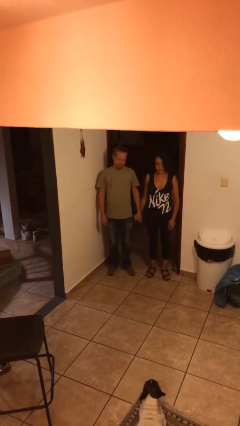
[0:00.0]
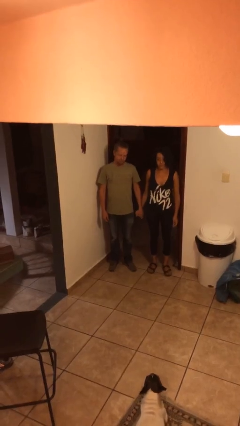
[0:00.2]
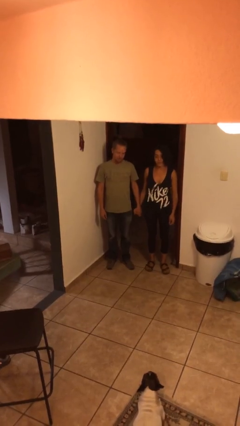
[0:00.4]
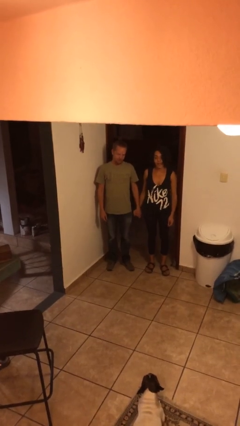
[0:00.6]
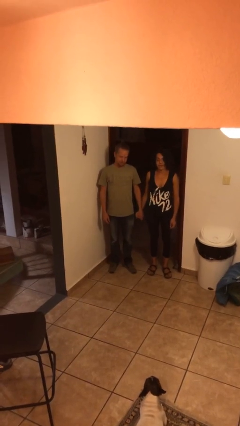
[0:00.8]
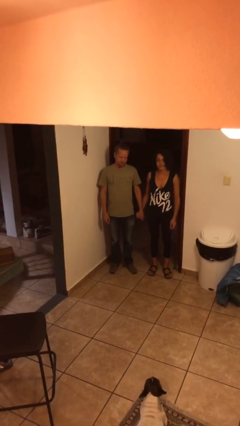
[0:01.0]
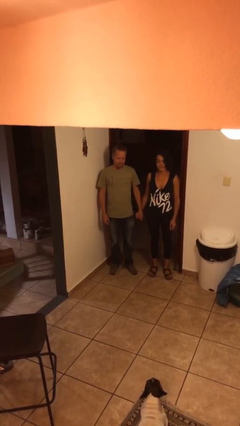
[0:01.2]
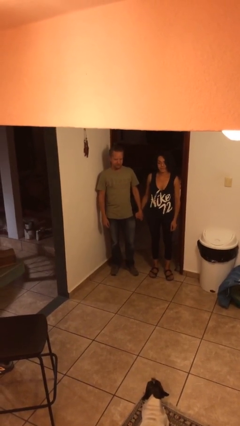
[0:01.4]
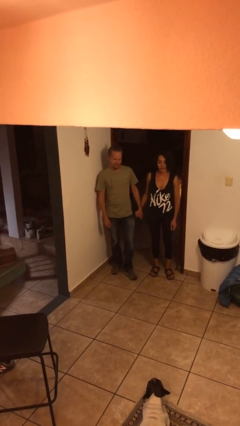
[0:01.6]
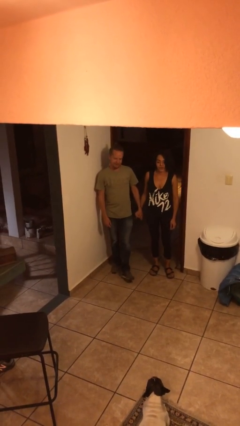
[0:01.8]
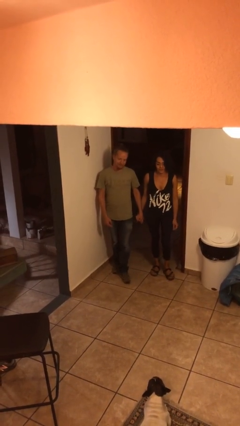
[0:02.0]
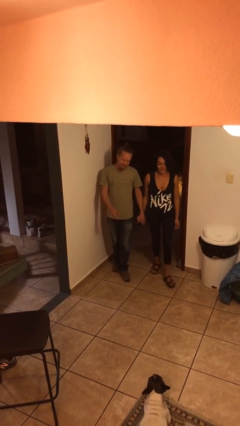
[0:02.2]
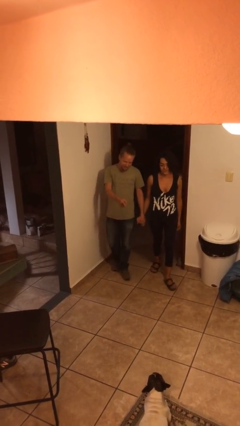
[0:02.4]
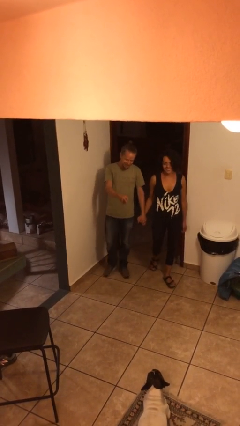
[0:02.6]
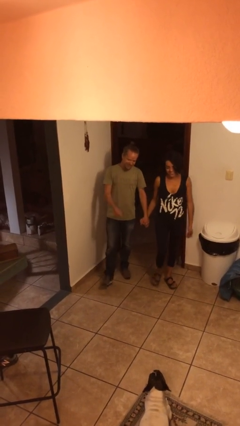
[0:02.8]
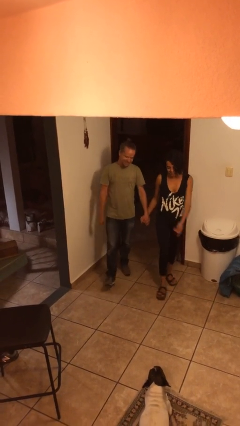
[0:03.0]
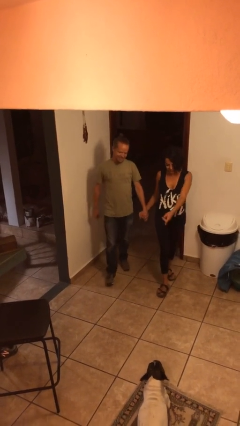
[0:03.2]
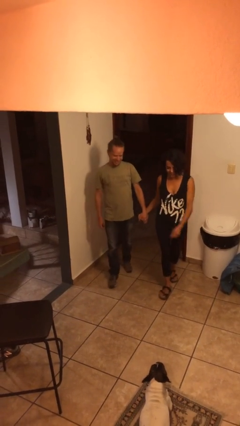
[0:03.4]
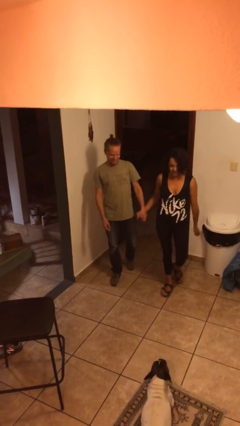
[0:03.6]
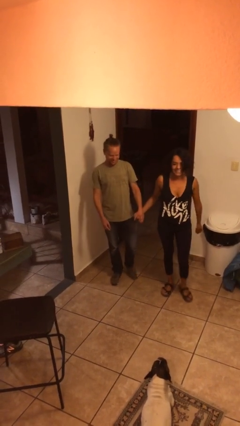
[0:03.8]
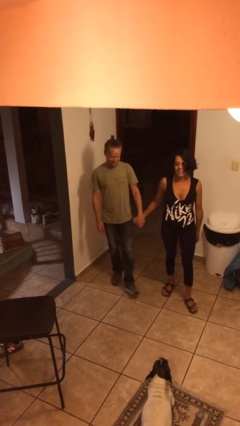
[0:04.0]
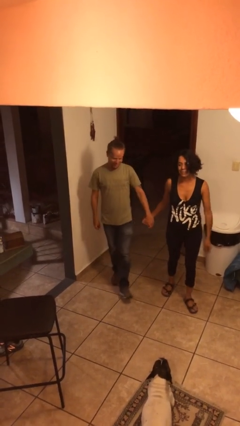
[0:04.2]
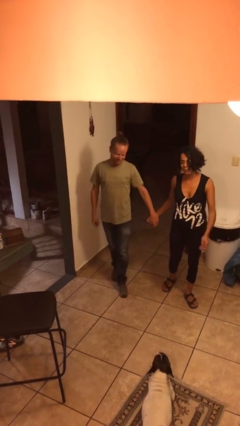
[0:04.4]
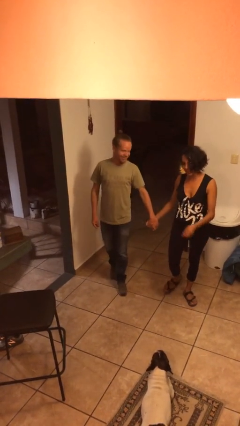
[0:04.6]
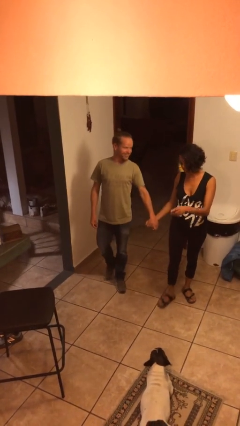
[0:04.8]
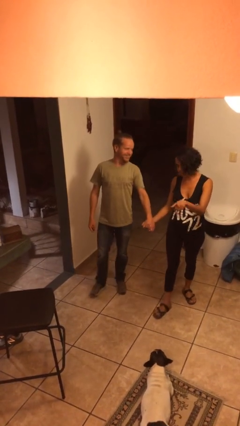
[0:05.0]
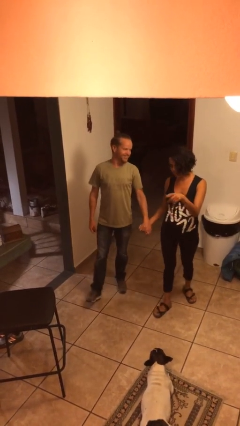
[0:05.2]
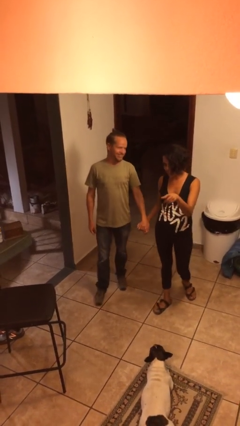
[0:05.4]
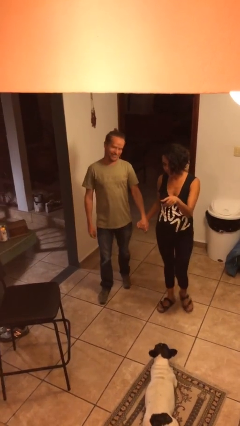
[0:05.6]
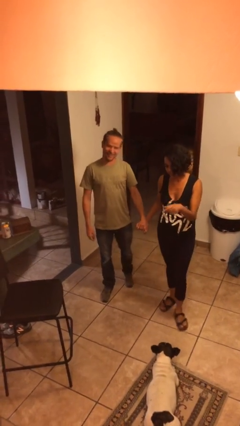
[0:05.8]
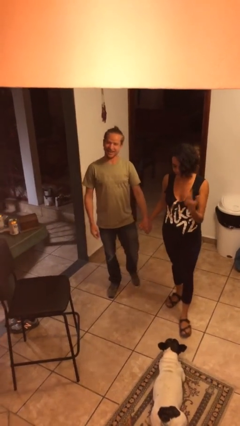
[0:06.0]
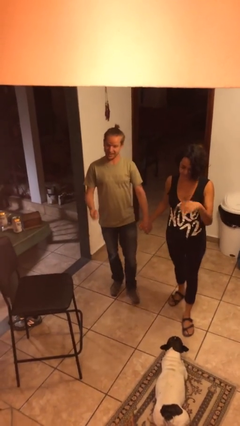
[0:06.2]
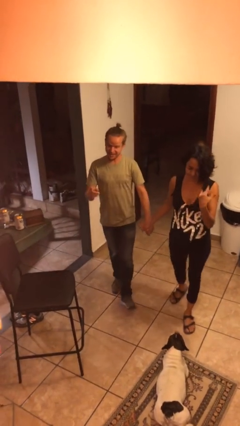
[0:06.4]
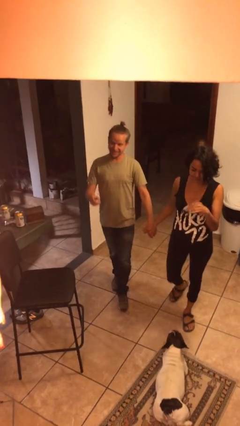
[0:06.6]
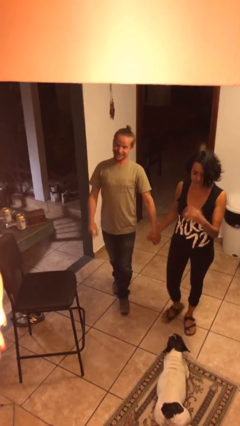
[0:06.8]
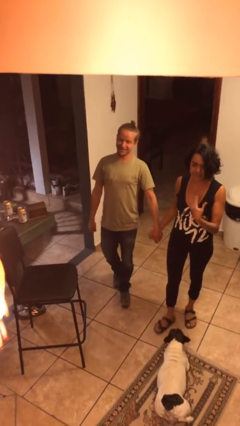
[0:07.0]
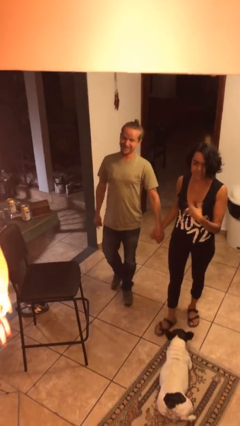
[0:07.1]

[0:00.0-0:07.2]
person holds hand

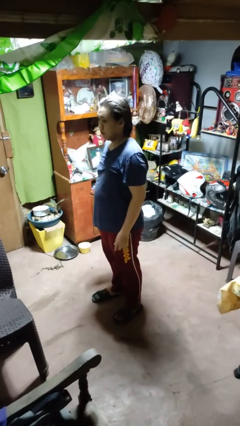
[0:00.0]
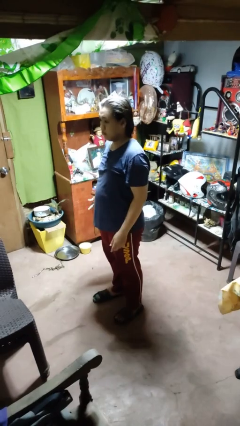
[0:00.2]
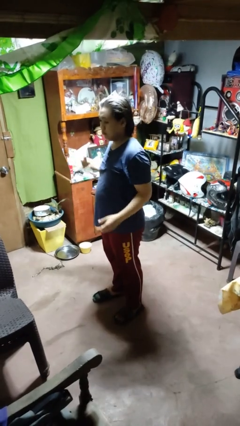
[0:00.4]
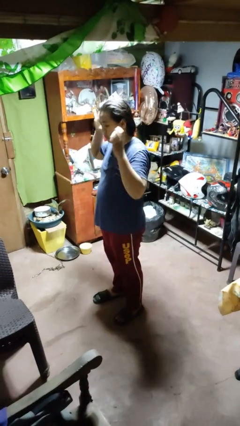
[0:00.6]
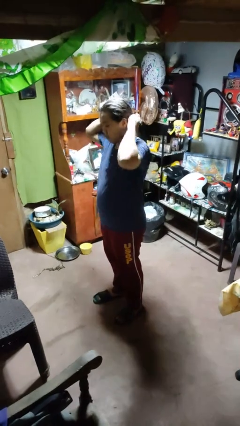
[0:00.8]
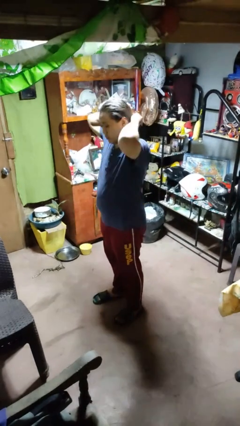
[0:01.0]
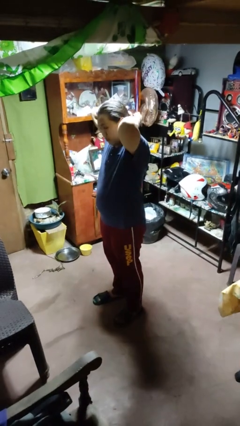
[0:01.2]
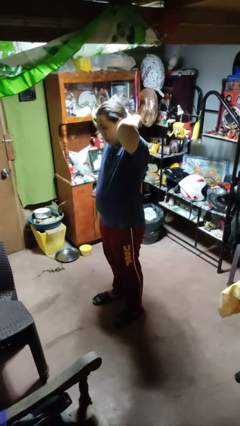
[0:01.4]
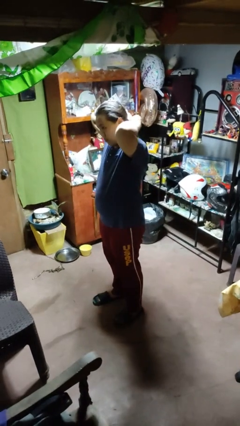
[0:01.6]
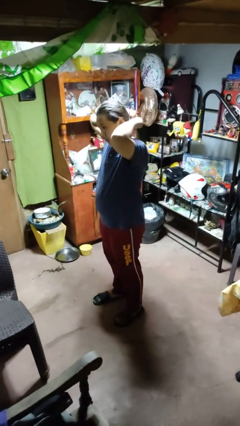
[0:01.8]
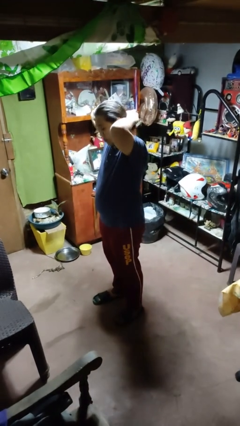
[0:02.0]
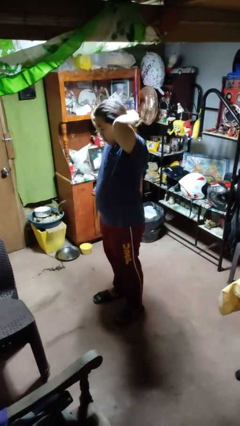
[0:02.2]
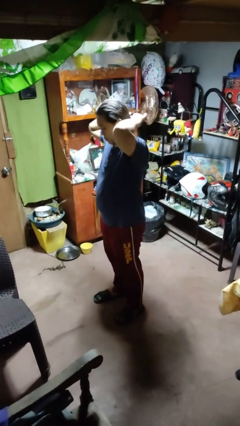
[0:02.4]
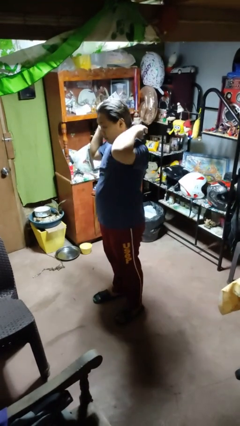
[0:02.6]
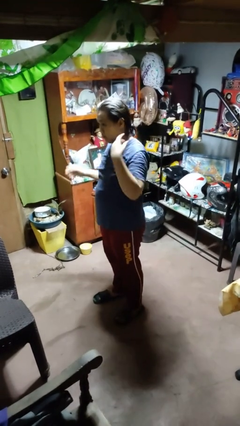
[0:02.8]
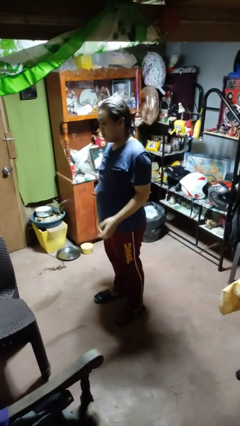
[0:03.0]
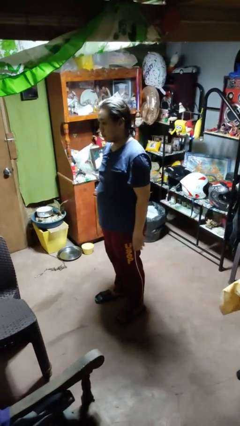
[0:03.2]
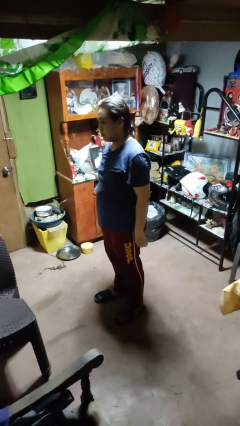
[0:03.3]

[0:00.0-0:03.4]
person puts hair in ponytail

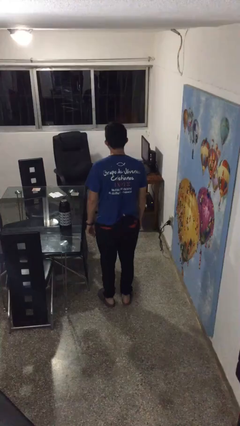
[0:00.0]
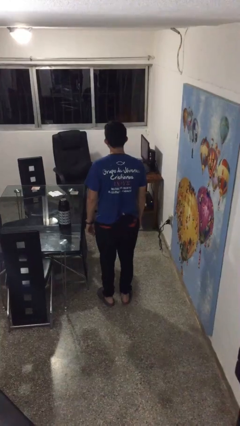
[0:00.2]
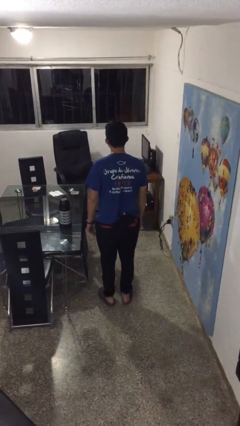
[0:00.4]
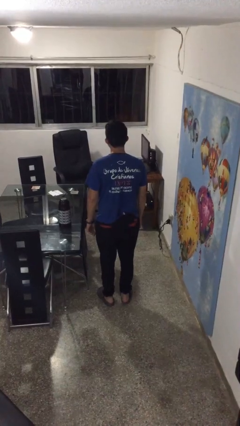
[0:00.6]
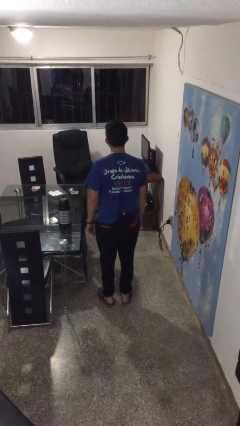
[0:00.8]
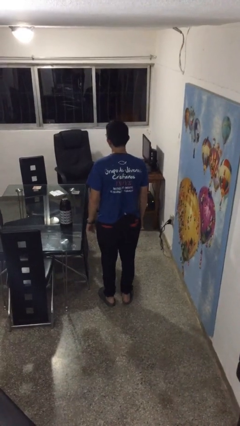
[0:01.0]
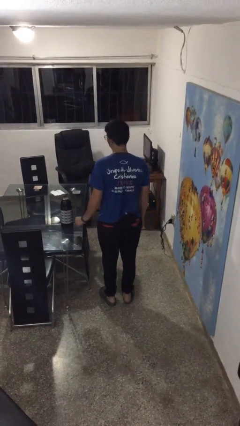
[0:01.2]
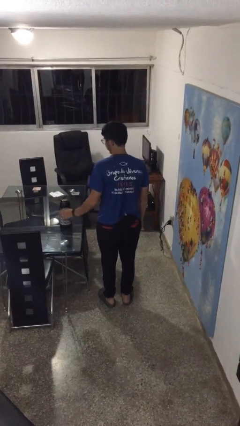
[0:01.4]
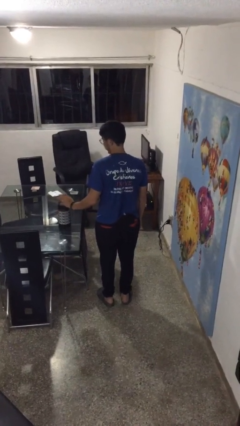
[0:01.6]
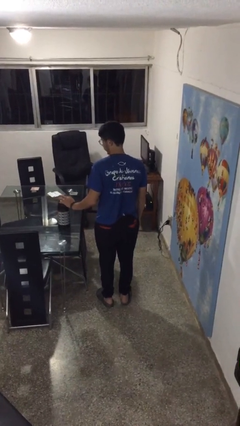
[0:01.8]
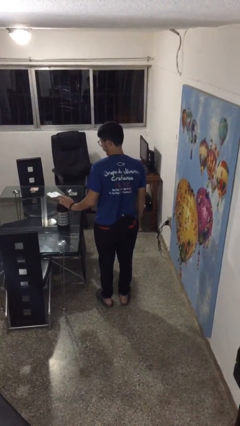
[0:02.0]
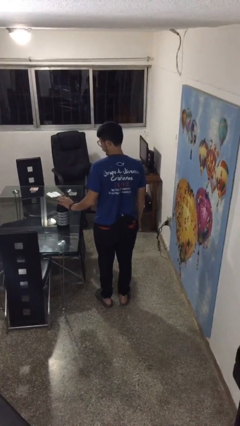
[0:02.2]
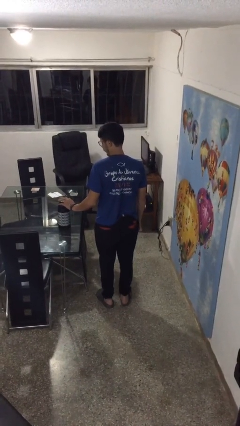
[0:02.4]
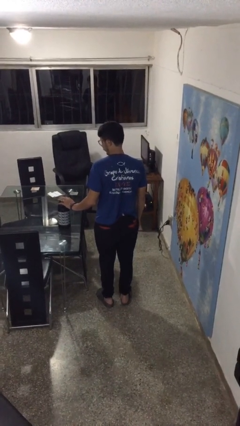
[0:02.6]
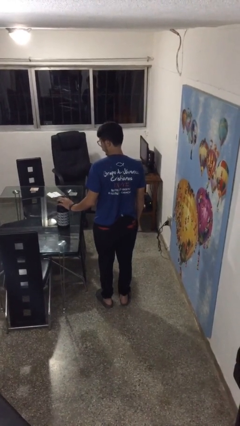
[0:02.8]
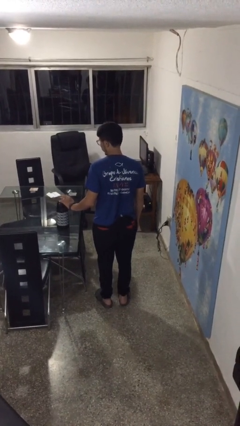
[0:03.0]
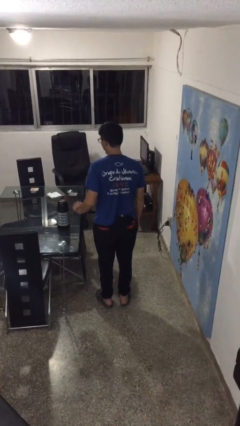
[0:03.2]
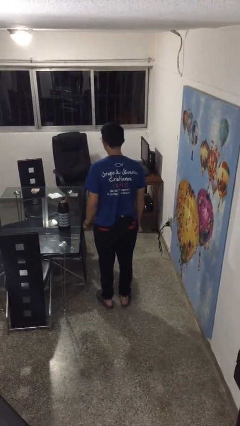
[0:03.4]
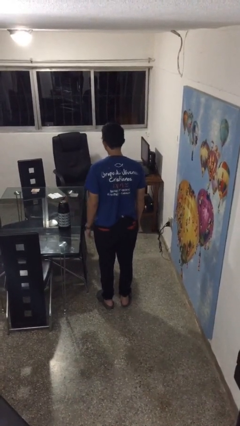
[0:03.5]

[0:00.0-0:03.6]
person taps object with finger

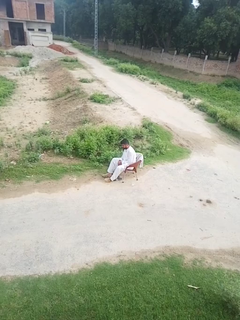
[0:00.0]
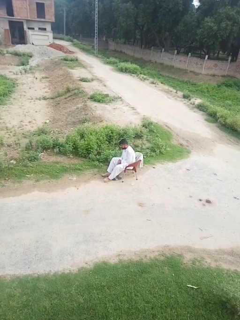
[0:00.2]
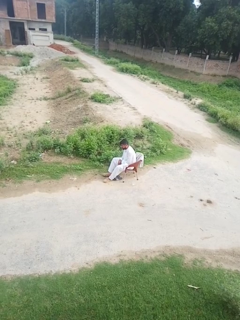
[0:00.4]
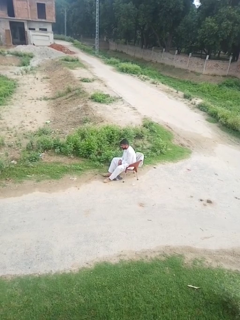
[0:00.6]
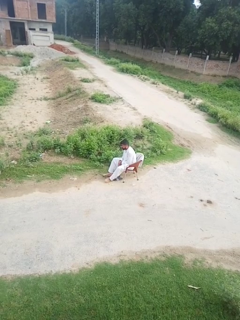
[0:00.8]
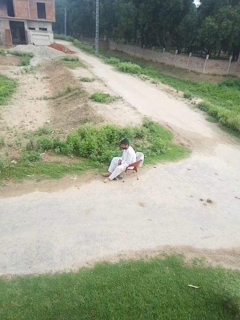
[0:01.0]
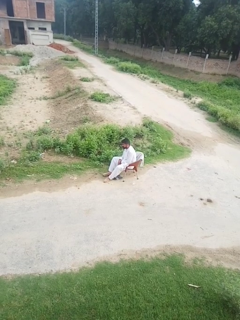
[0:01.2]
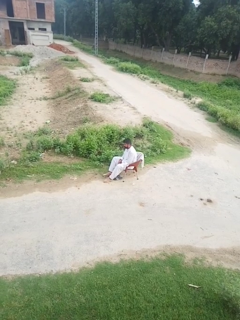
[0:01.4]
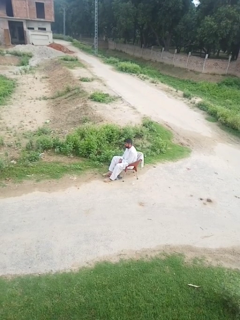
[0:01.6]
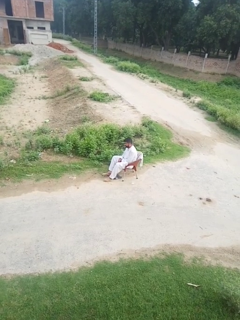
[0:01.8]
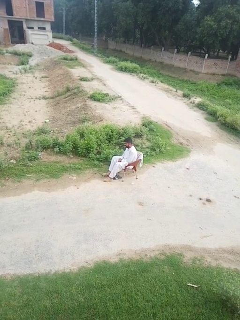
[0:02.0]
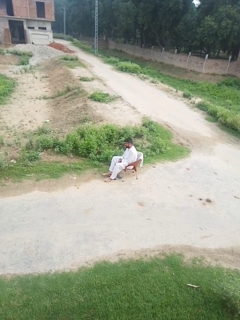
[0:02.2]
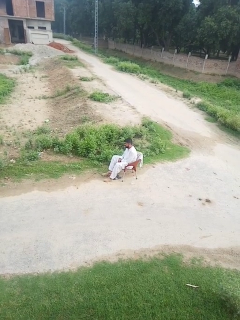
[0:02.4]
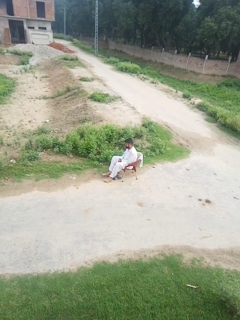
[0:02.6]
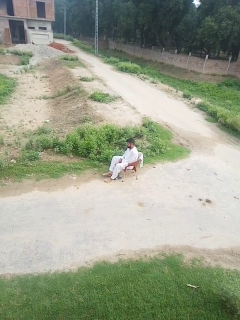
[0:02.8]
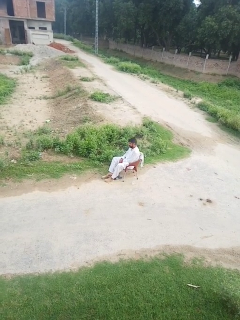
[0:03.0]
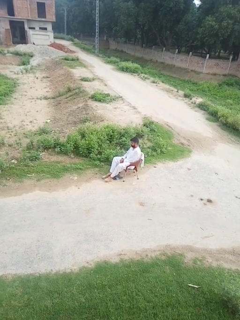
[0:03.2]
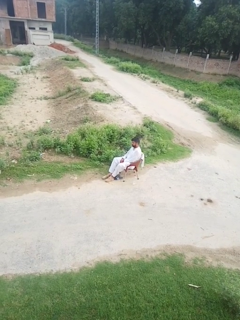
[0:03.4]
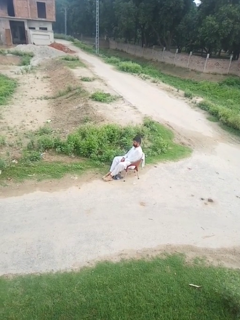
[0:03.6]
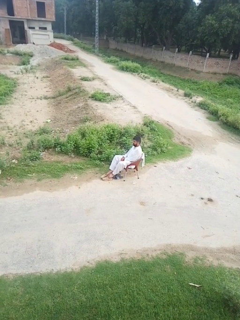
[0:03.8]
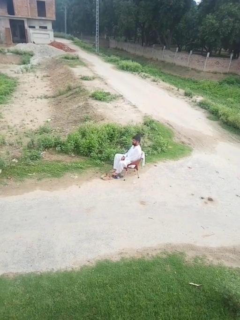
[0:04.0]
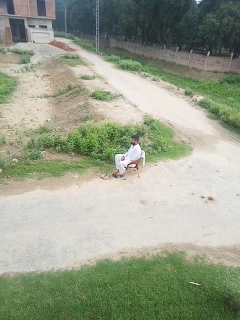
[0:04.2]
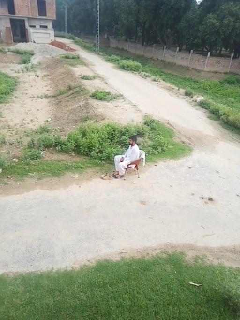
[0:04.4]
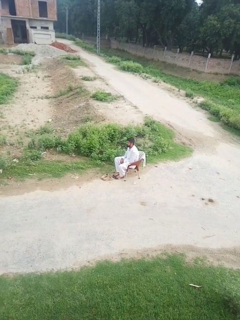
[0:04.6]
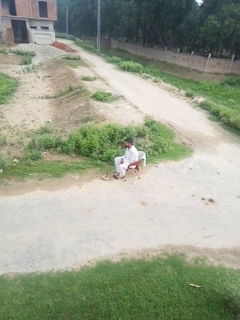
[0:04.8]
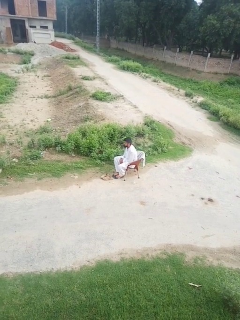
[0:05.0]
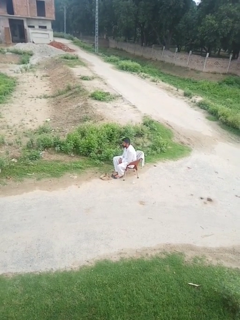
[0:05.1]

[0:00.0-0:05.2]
person takes off shoes
